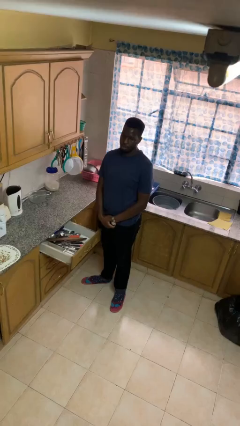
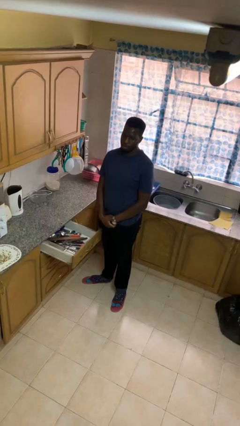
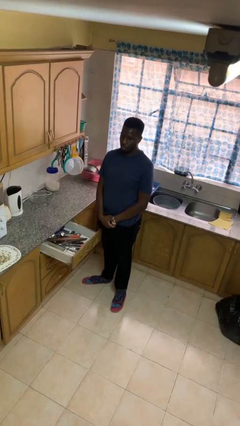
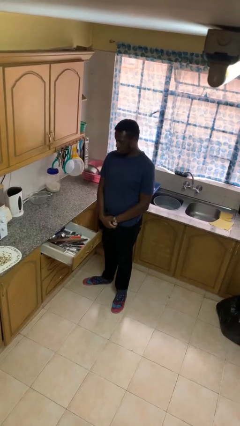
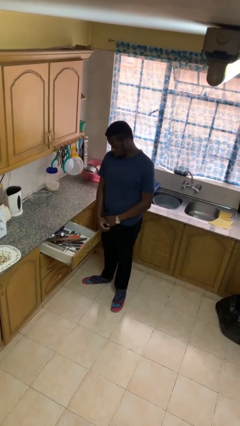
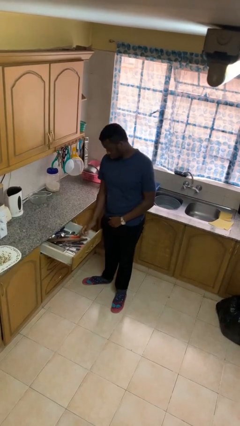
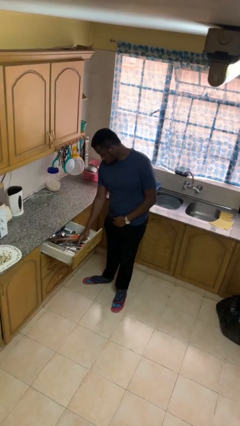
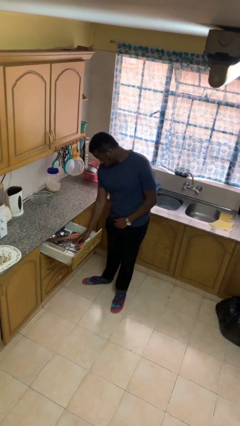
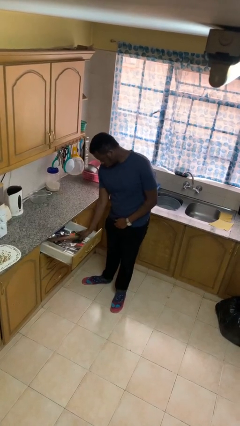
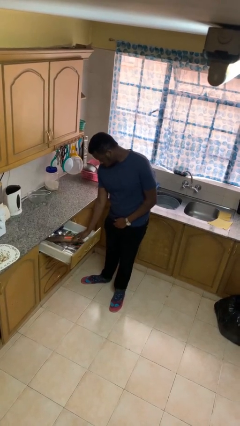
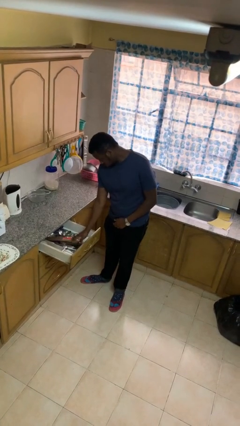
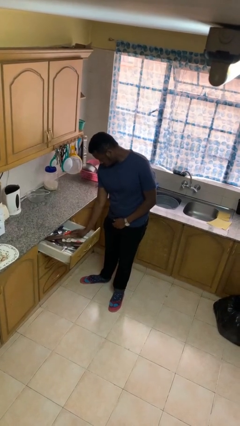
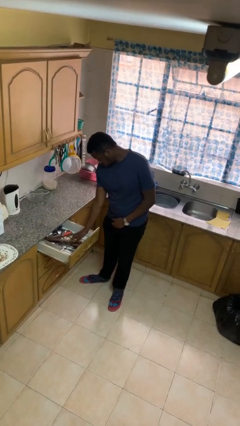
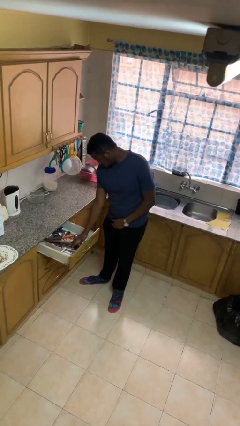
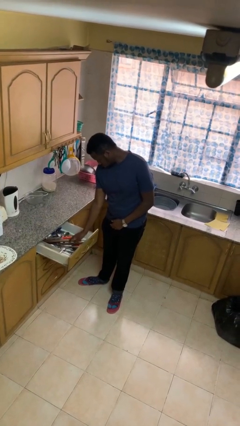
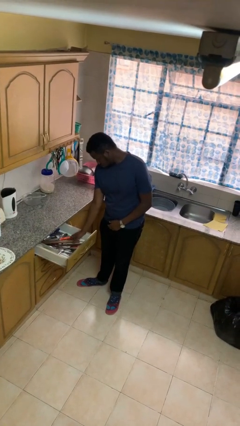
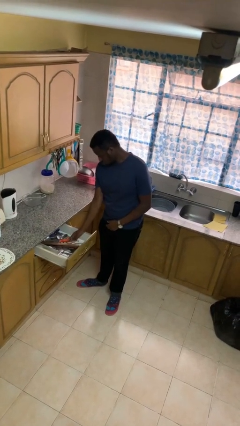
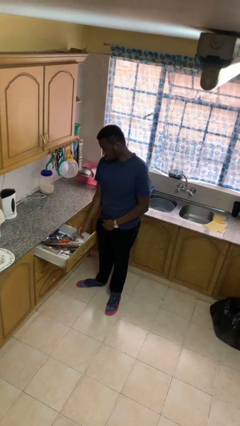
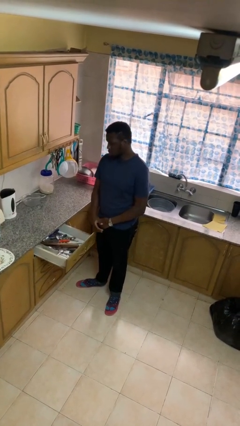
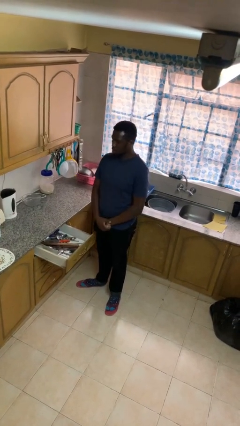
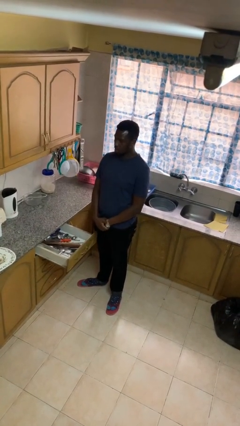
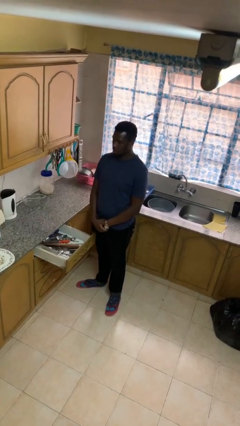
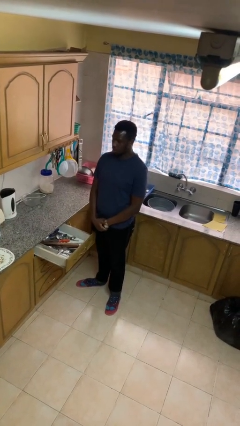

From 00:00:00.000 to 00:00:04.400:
person searches in kitchen drawer

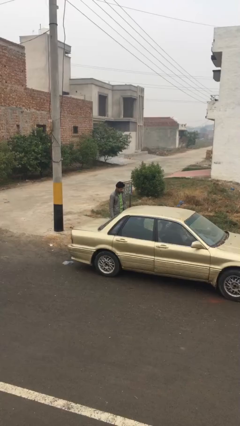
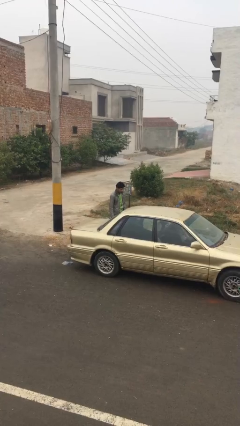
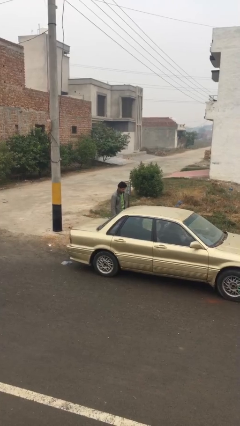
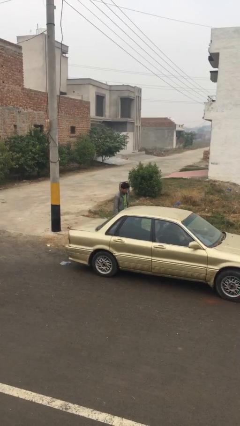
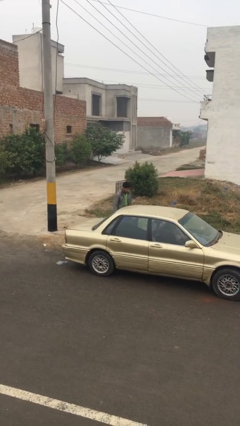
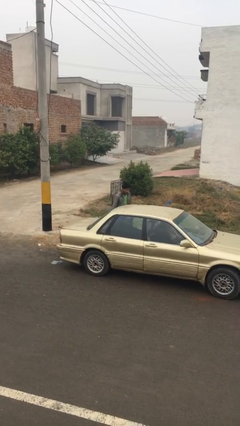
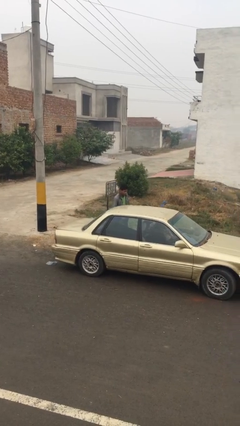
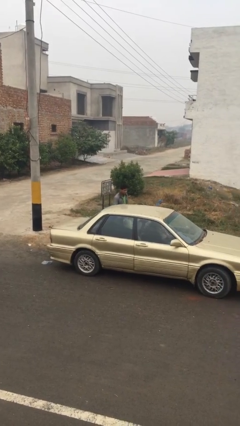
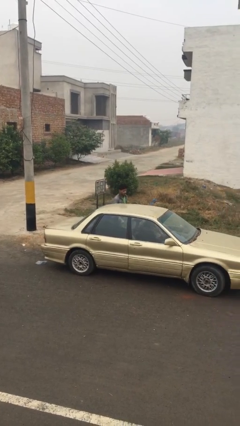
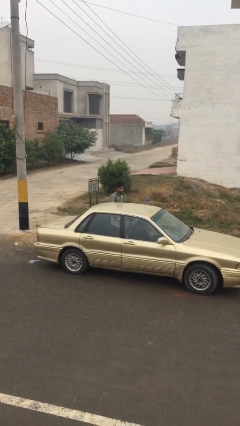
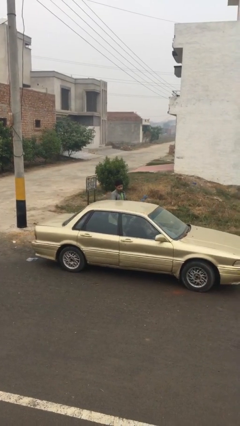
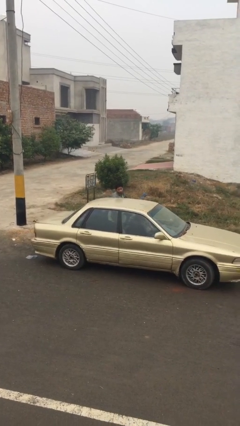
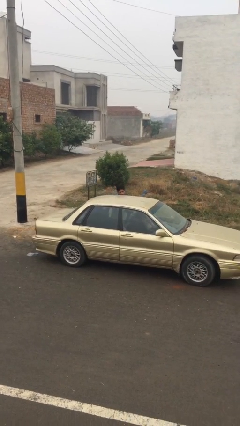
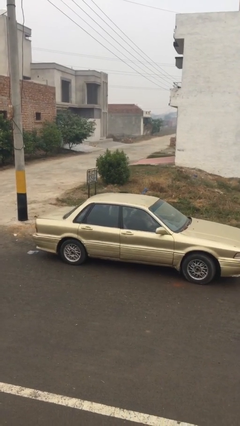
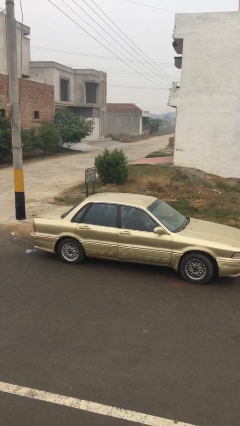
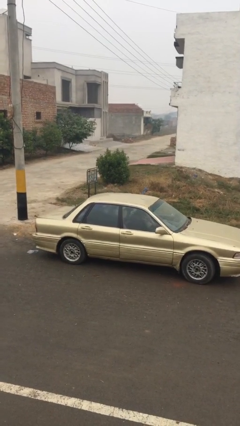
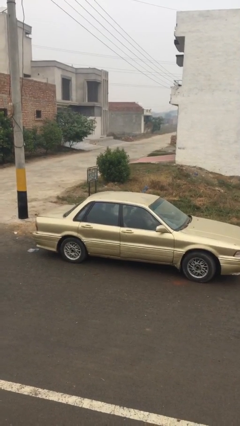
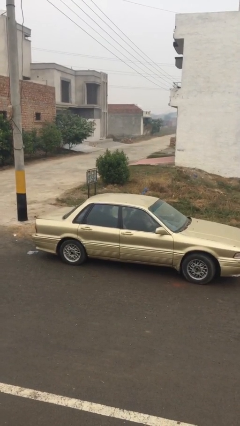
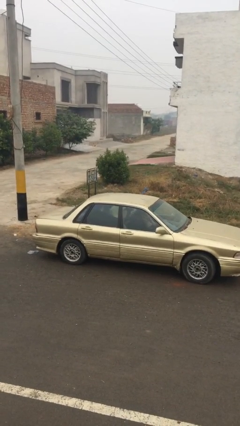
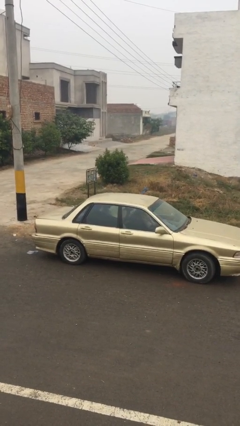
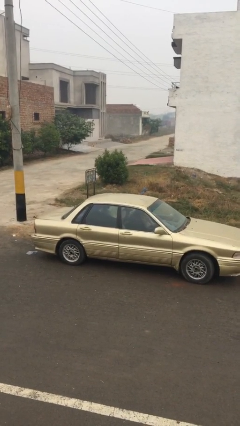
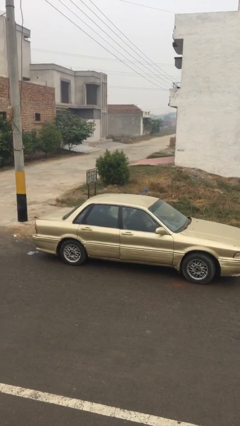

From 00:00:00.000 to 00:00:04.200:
person enters car

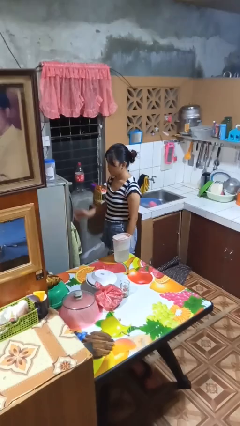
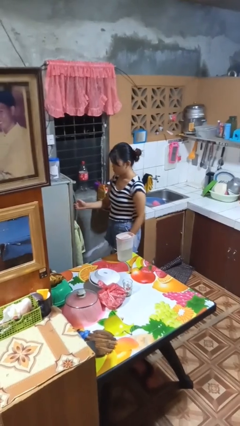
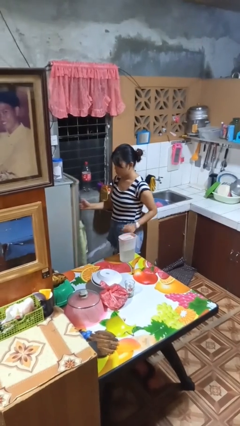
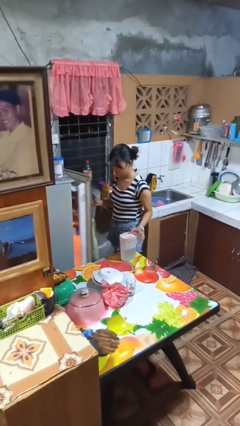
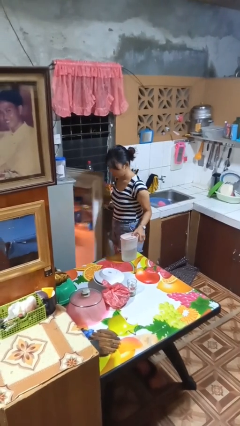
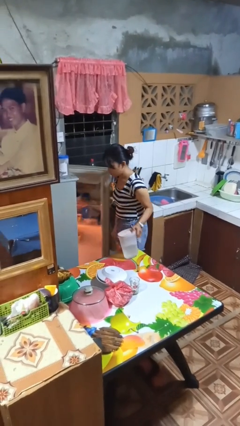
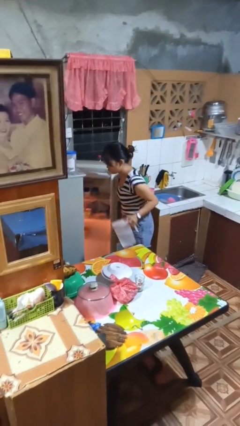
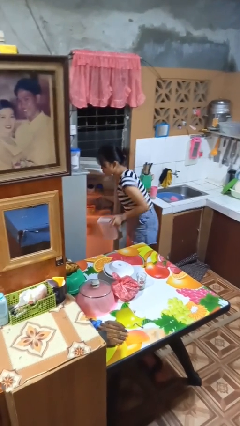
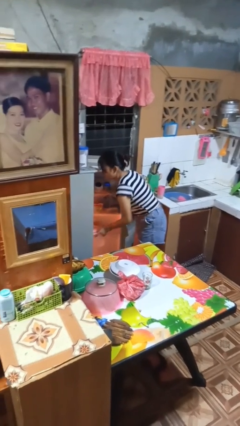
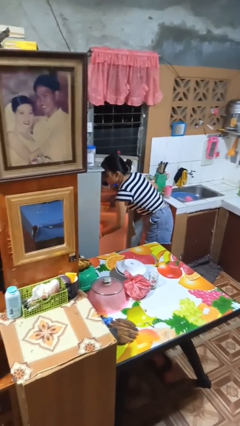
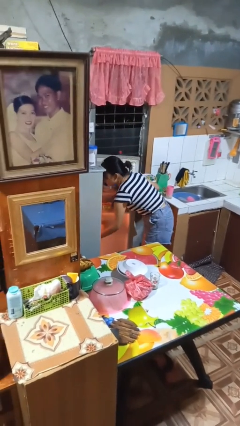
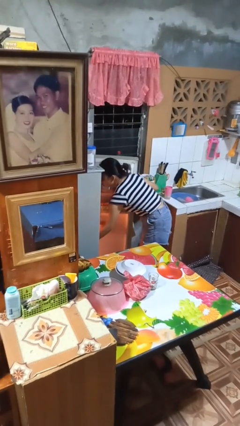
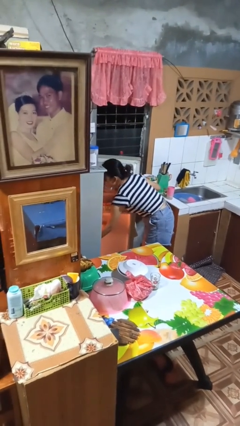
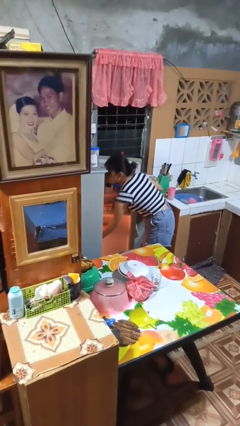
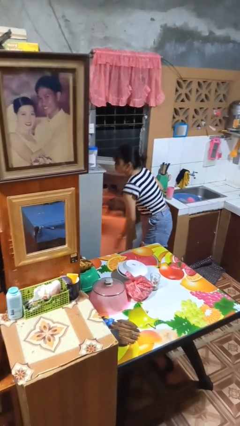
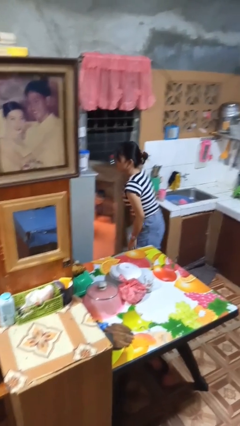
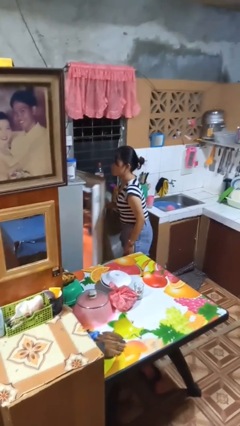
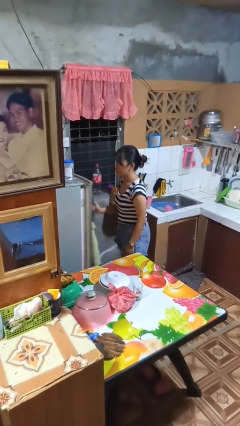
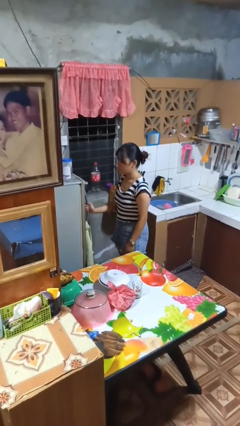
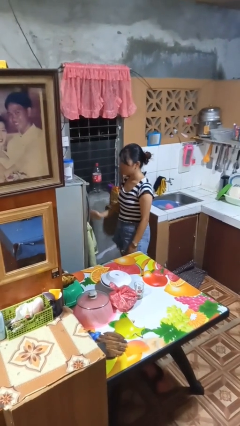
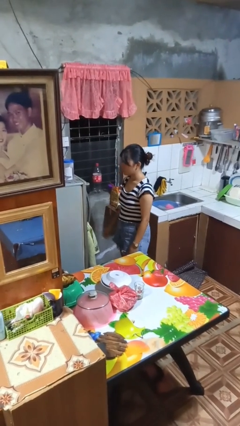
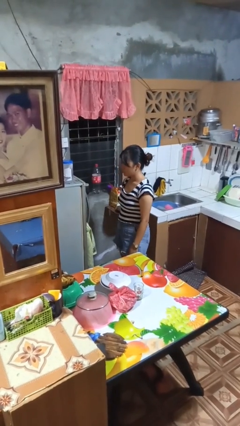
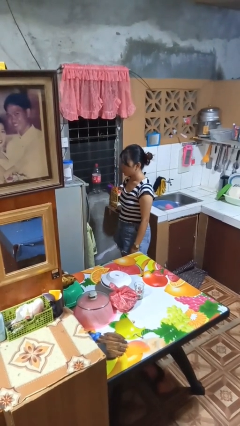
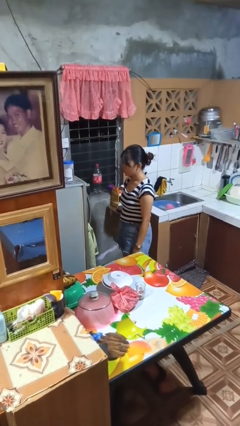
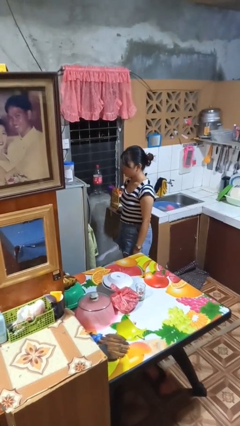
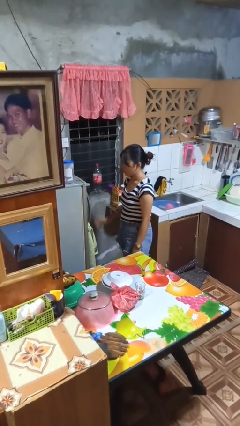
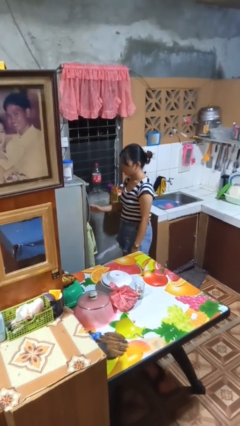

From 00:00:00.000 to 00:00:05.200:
person puts object into refrigerator

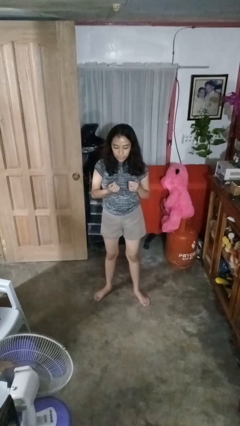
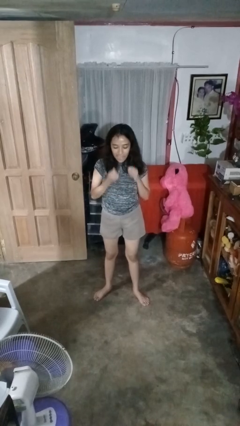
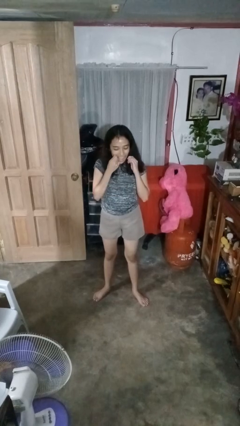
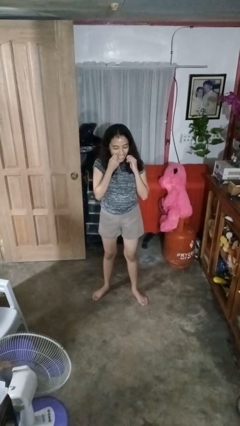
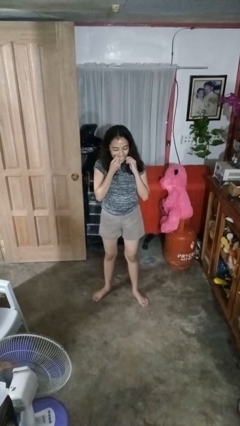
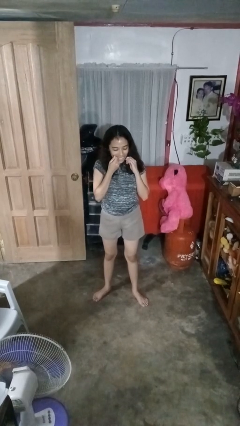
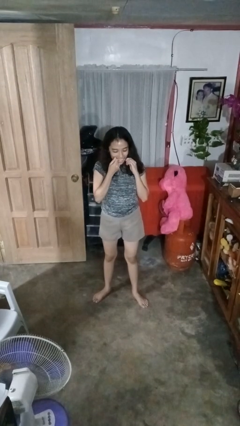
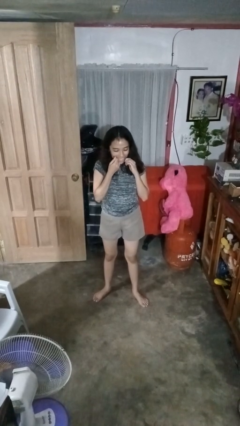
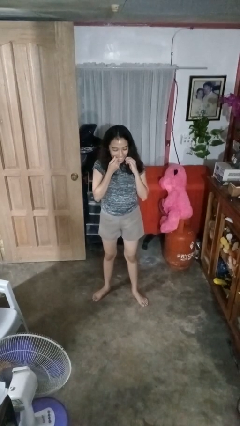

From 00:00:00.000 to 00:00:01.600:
person flosses

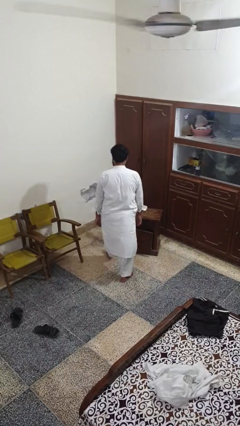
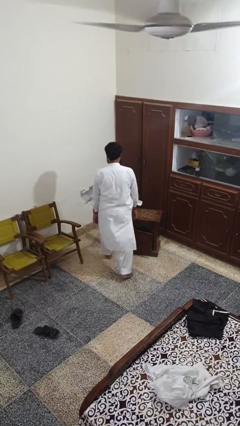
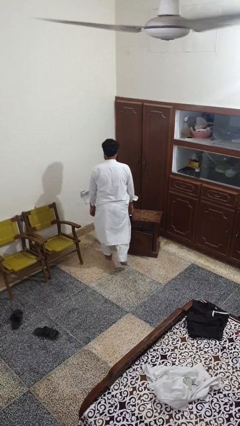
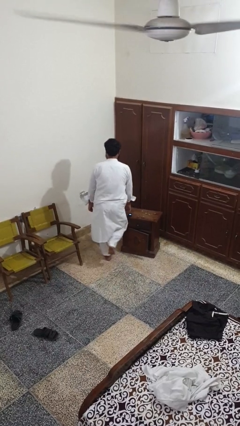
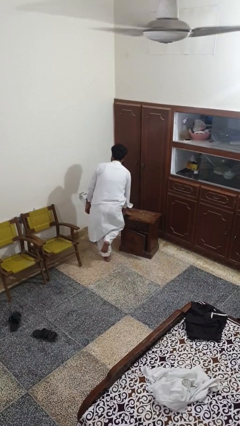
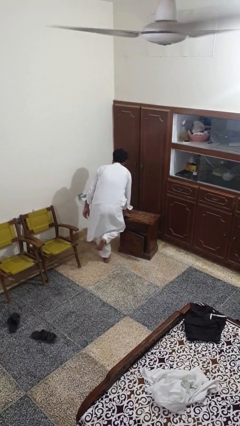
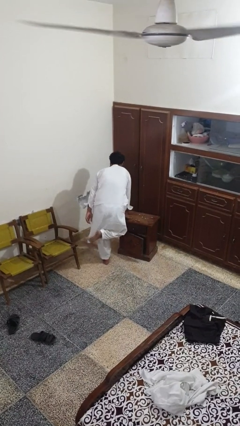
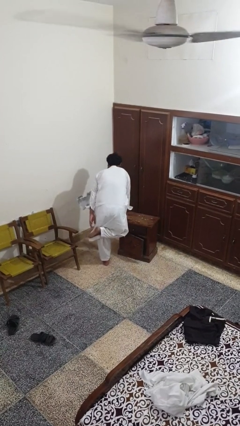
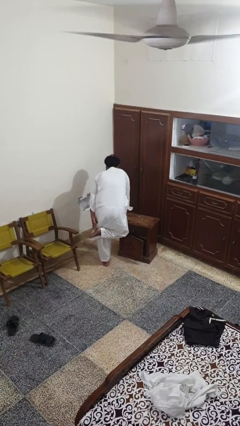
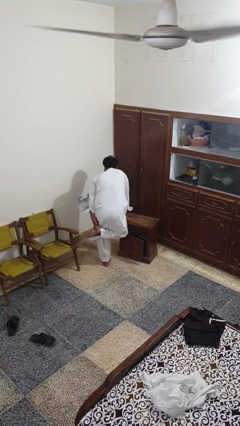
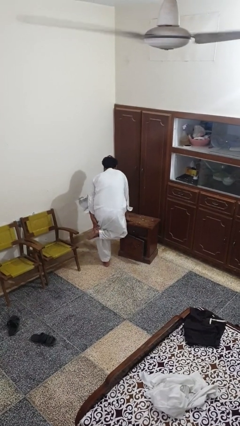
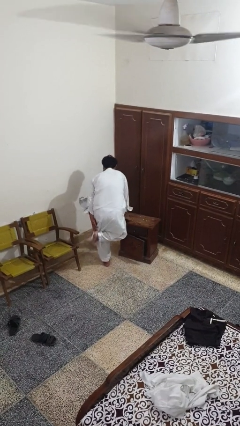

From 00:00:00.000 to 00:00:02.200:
person stubs toe
